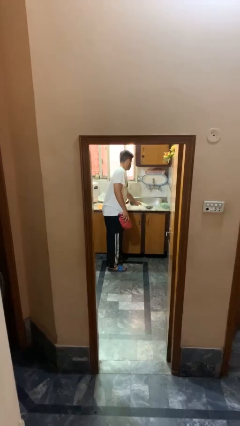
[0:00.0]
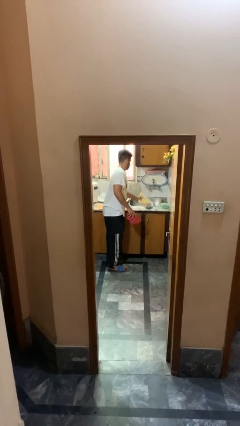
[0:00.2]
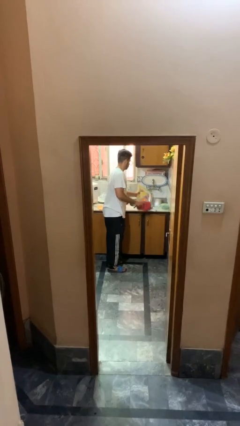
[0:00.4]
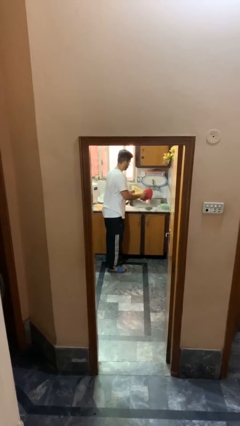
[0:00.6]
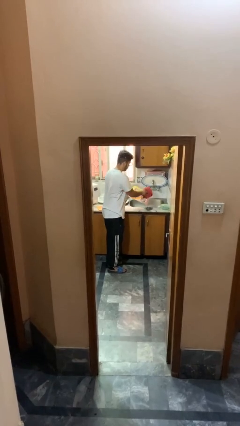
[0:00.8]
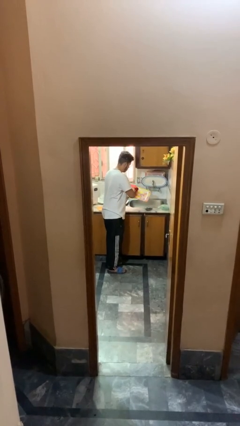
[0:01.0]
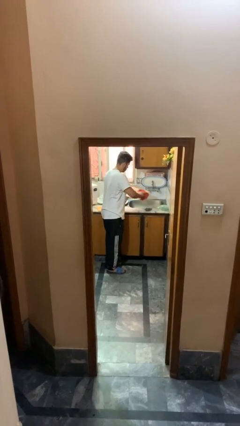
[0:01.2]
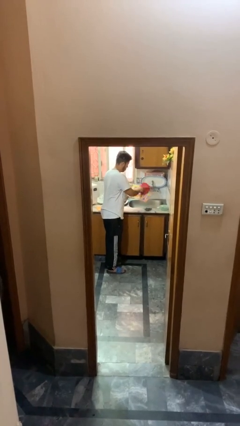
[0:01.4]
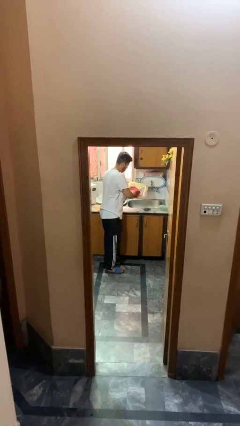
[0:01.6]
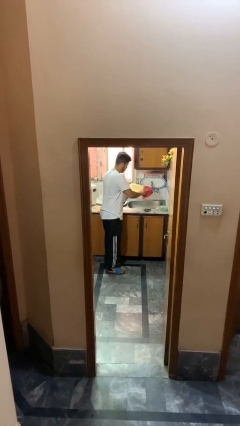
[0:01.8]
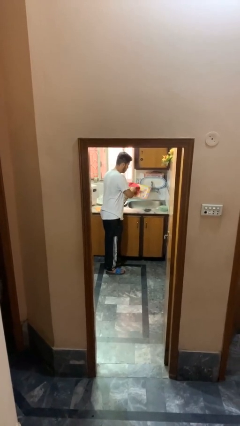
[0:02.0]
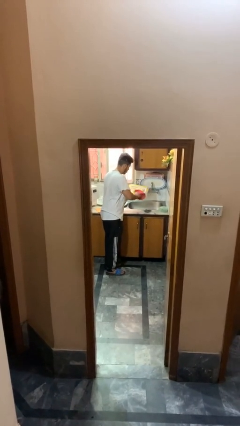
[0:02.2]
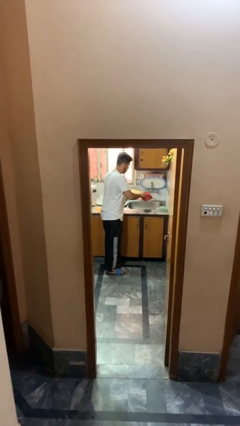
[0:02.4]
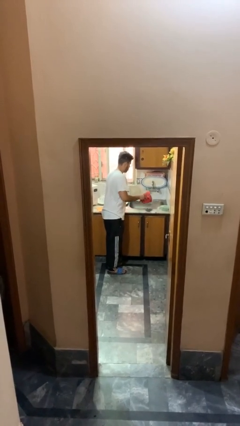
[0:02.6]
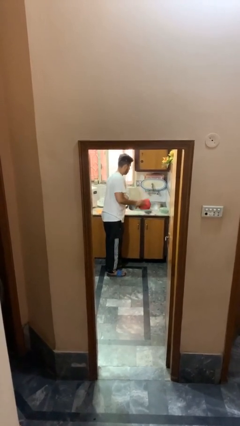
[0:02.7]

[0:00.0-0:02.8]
person dries dish

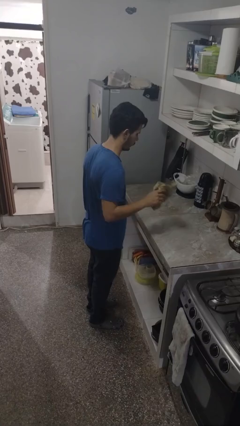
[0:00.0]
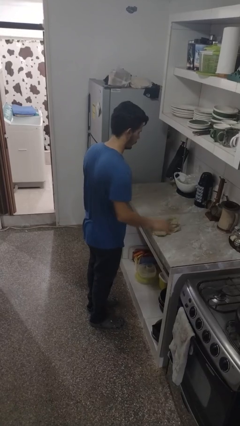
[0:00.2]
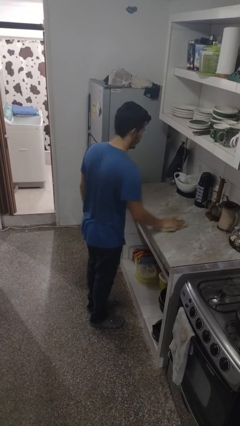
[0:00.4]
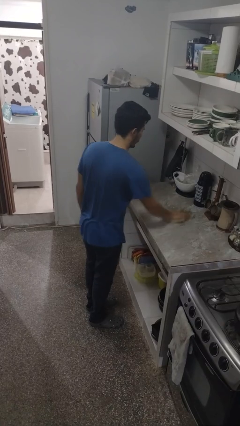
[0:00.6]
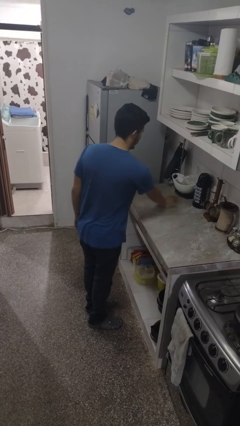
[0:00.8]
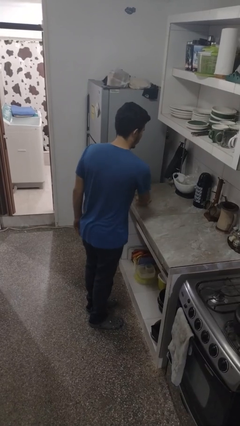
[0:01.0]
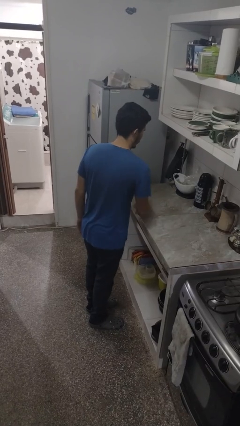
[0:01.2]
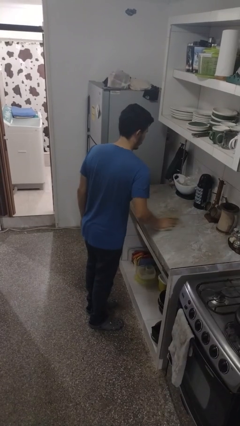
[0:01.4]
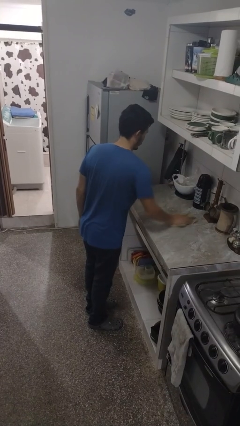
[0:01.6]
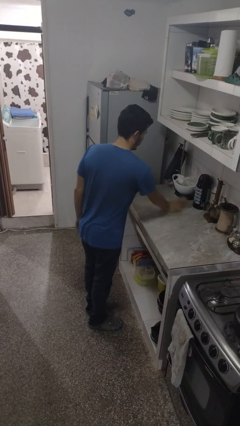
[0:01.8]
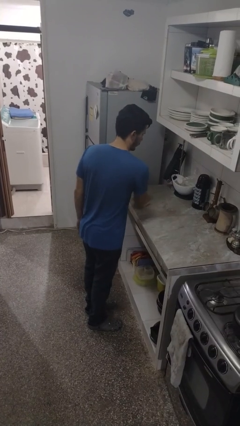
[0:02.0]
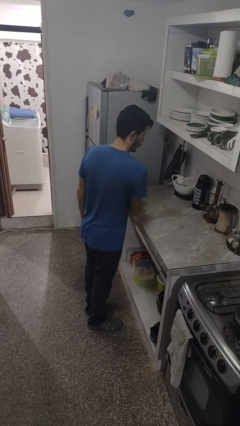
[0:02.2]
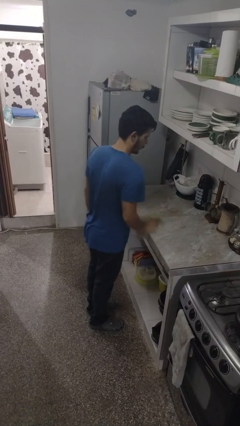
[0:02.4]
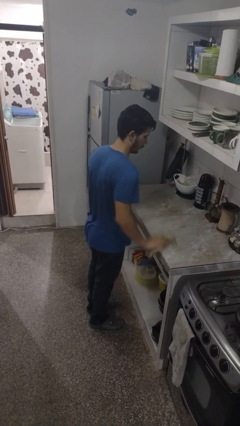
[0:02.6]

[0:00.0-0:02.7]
person cleans table with rag

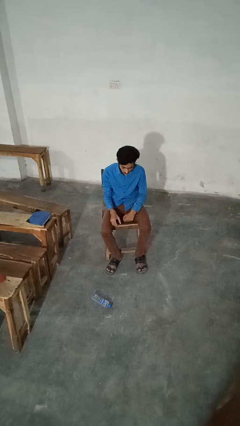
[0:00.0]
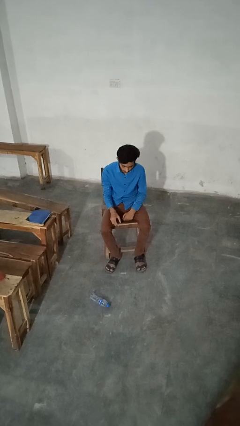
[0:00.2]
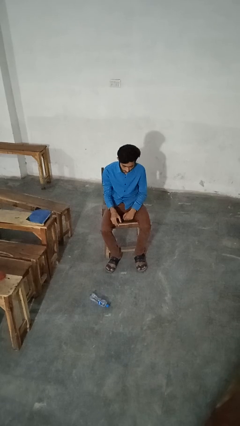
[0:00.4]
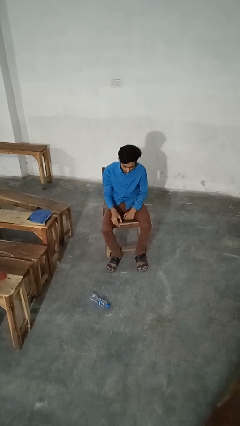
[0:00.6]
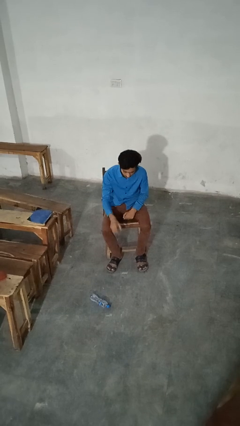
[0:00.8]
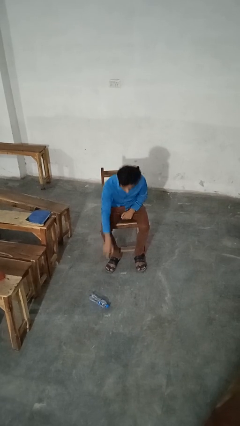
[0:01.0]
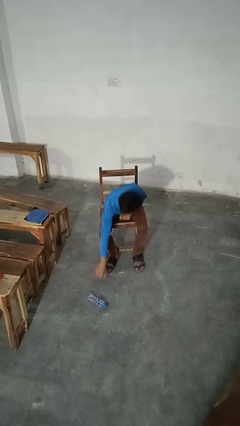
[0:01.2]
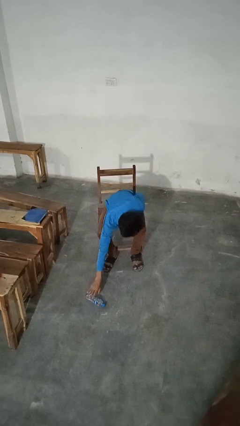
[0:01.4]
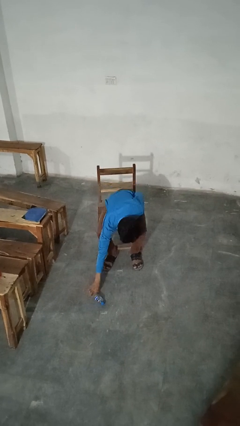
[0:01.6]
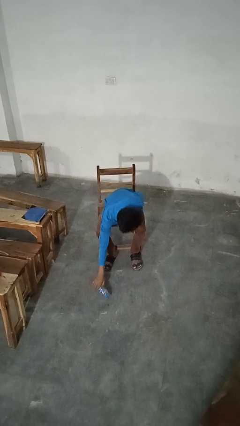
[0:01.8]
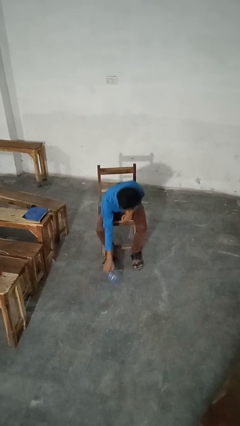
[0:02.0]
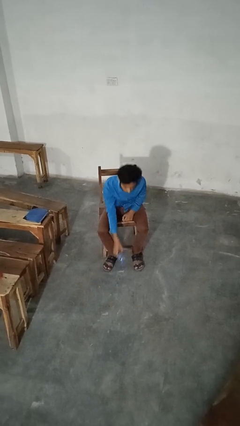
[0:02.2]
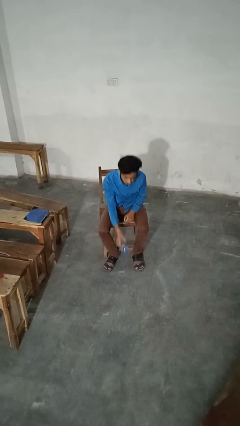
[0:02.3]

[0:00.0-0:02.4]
person picks up object from floor

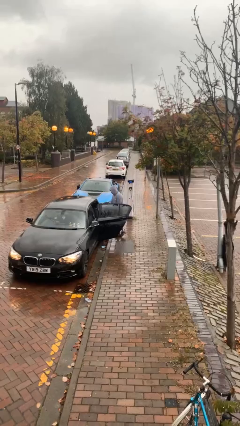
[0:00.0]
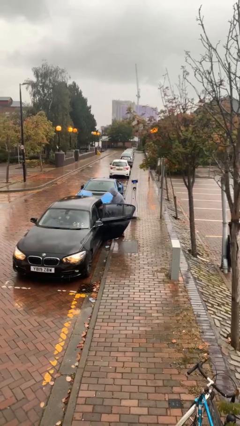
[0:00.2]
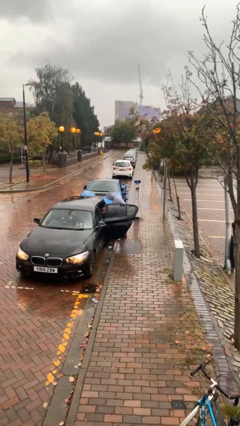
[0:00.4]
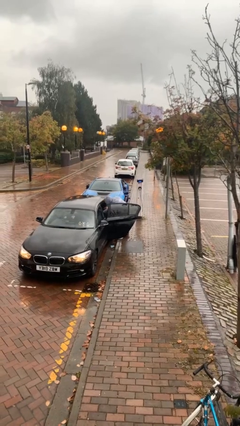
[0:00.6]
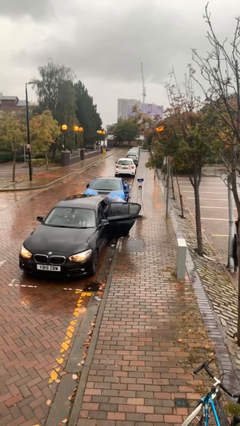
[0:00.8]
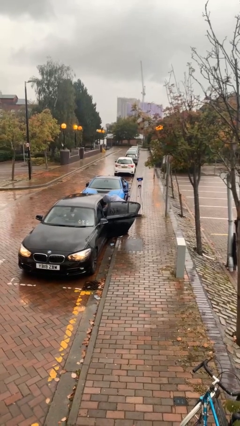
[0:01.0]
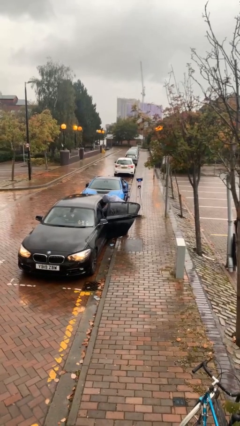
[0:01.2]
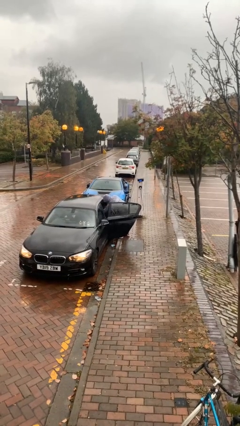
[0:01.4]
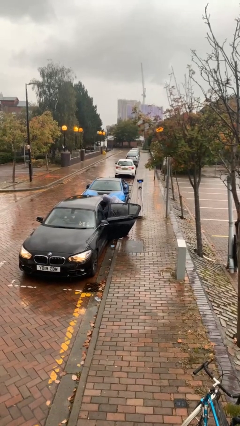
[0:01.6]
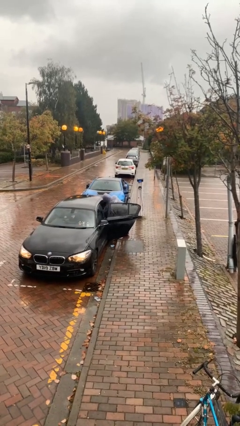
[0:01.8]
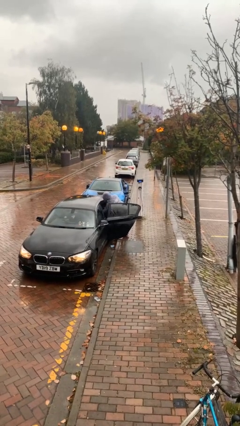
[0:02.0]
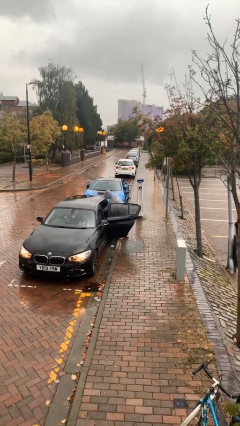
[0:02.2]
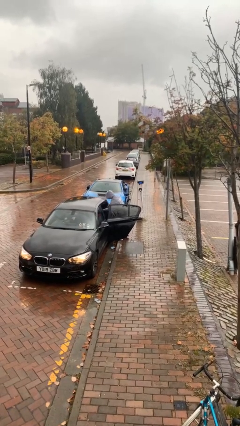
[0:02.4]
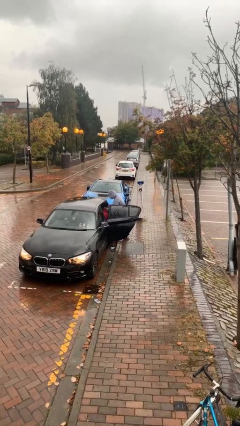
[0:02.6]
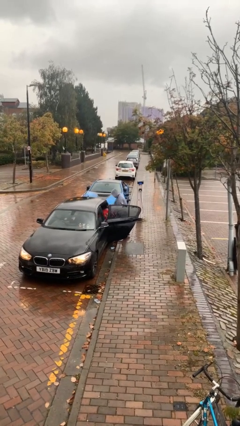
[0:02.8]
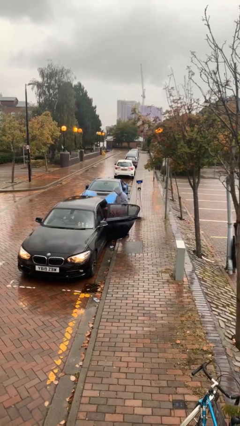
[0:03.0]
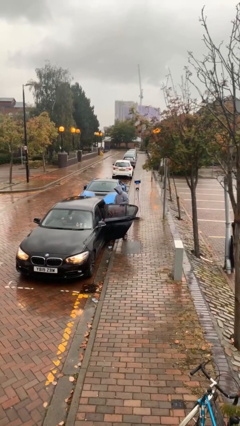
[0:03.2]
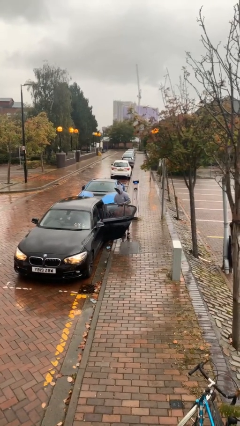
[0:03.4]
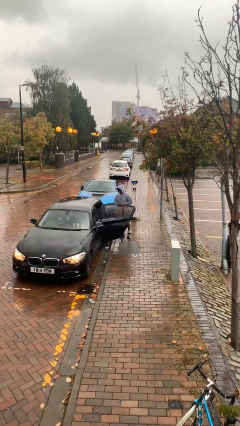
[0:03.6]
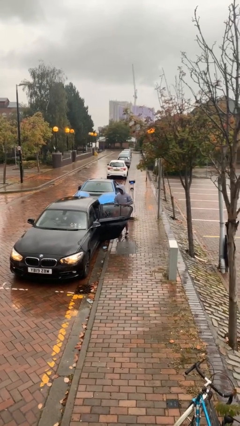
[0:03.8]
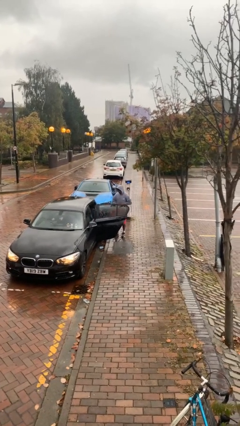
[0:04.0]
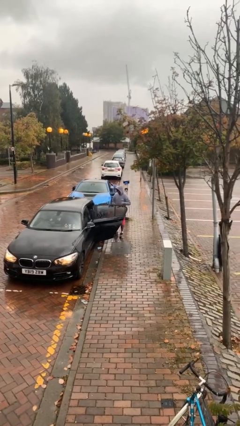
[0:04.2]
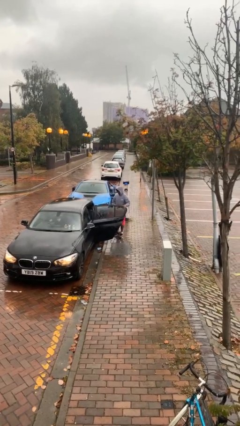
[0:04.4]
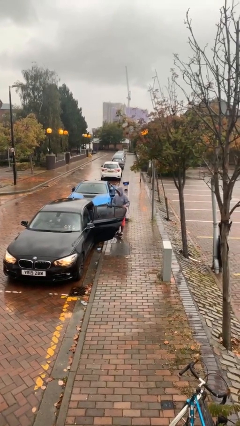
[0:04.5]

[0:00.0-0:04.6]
person unloads car

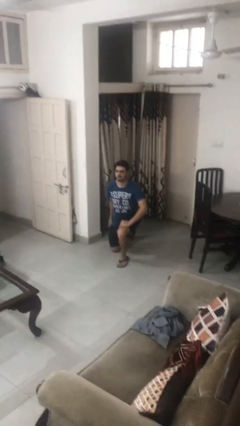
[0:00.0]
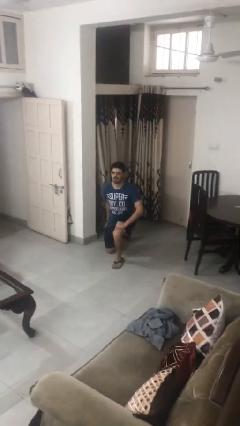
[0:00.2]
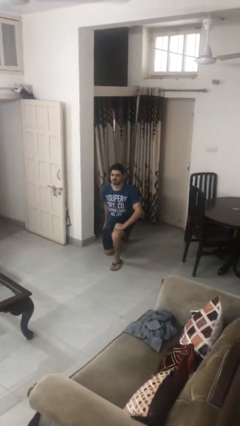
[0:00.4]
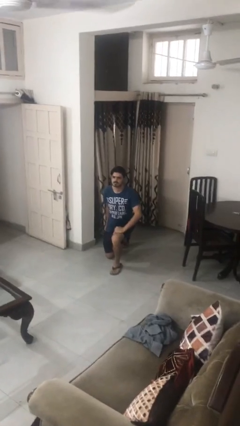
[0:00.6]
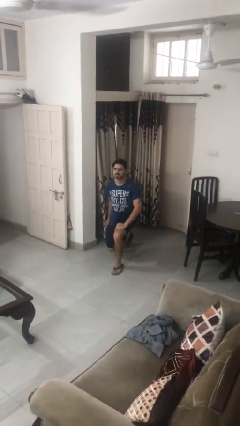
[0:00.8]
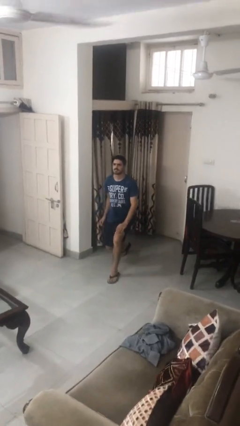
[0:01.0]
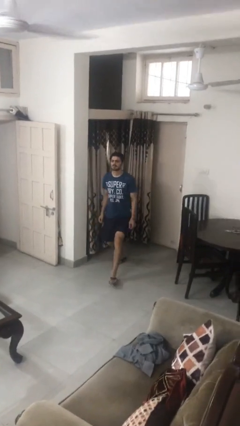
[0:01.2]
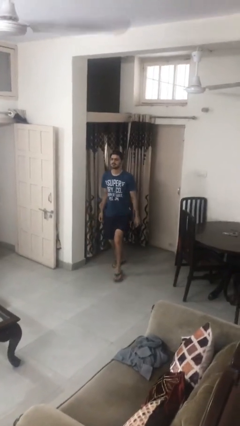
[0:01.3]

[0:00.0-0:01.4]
person stands up from floor

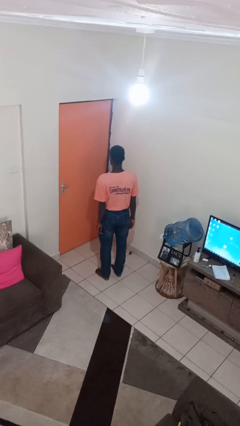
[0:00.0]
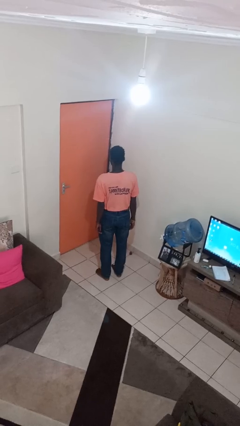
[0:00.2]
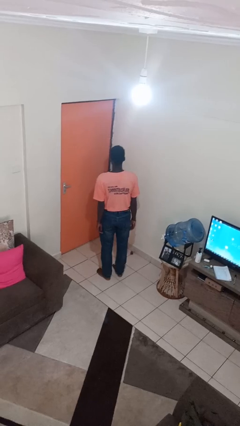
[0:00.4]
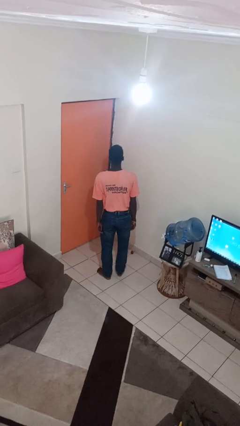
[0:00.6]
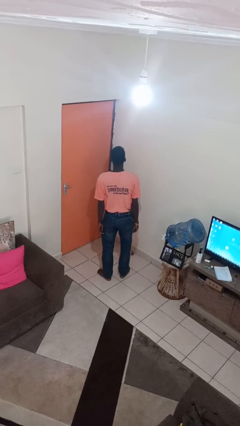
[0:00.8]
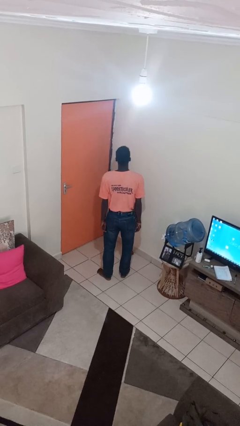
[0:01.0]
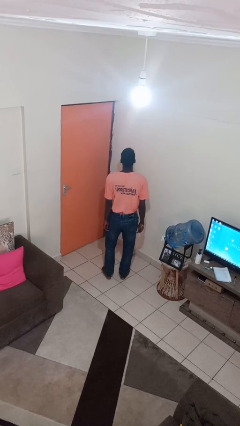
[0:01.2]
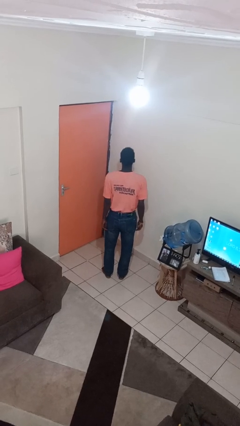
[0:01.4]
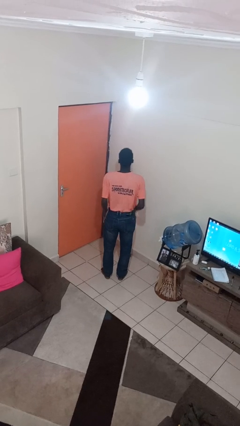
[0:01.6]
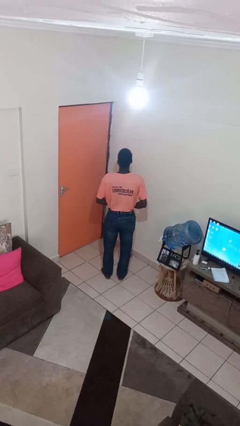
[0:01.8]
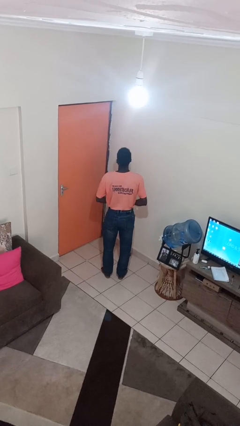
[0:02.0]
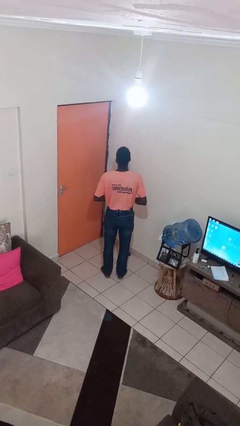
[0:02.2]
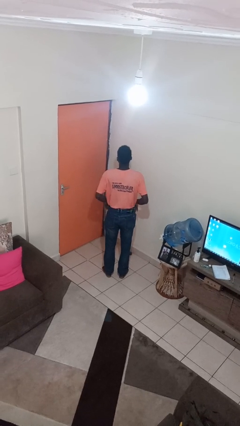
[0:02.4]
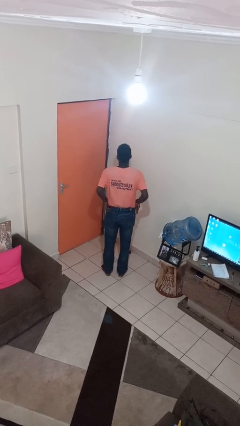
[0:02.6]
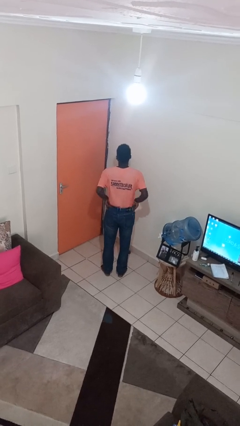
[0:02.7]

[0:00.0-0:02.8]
person hikes up pants

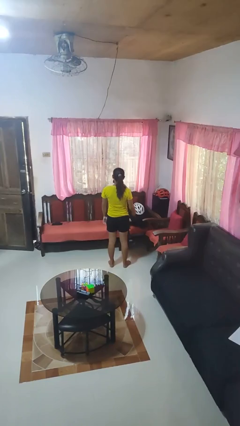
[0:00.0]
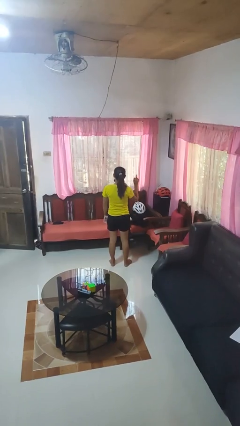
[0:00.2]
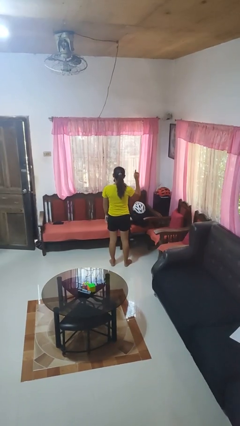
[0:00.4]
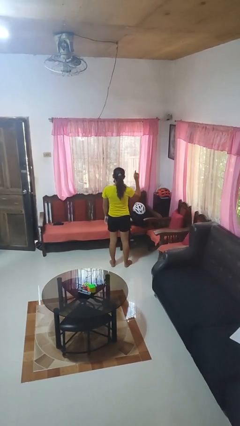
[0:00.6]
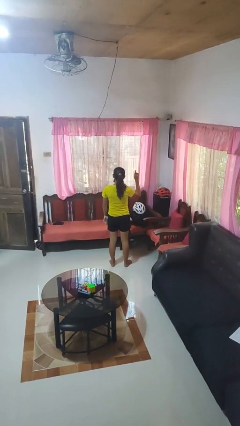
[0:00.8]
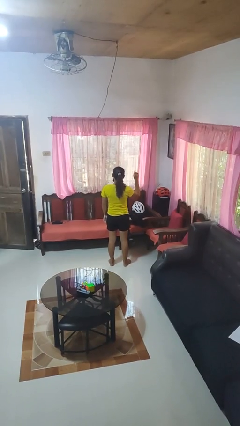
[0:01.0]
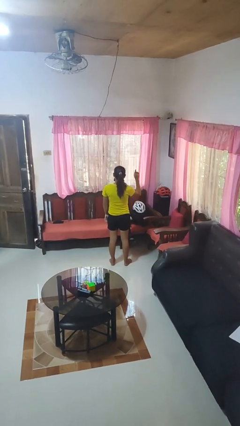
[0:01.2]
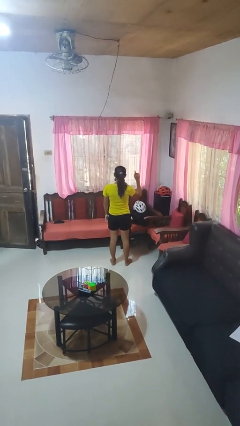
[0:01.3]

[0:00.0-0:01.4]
person gestures number one
